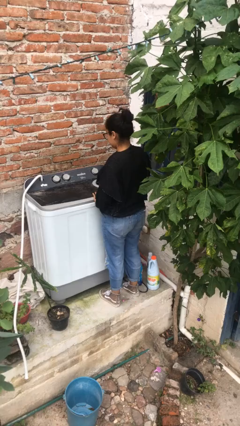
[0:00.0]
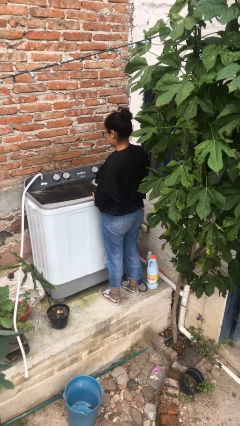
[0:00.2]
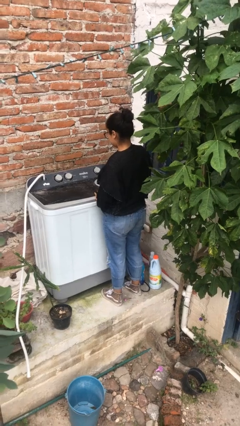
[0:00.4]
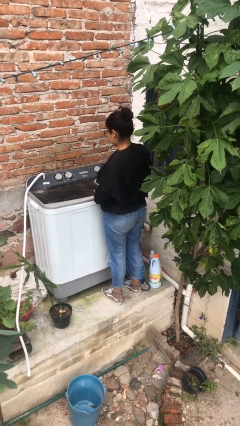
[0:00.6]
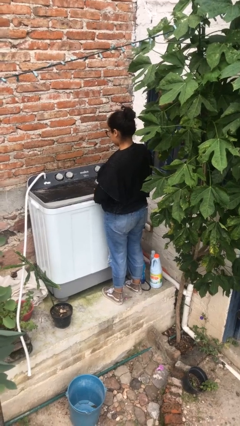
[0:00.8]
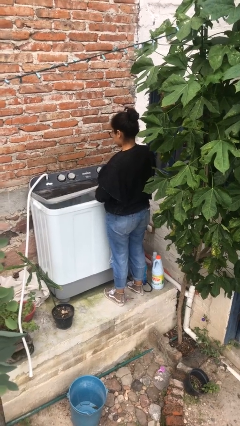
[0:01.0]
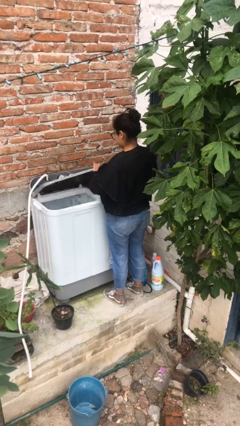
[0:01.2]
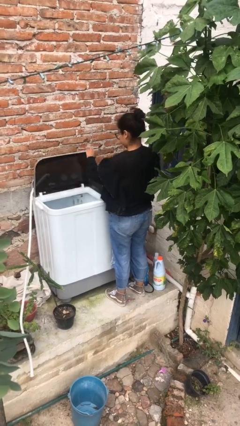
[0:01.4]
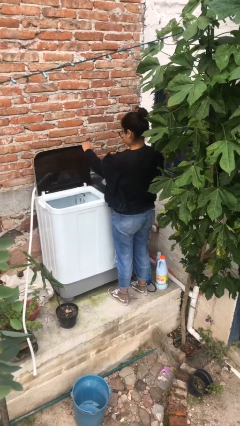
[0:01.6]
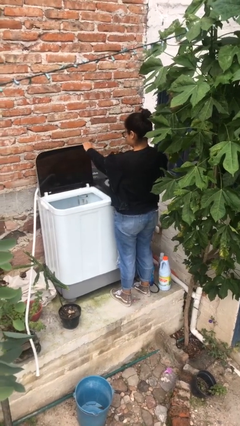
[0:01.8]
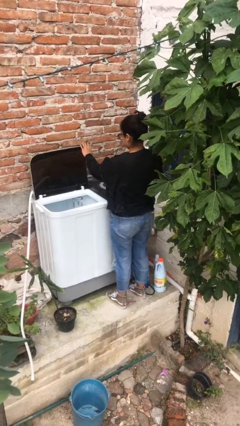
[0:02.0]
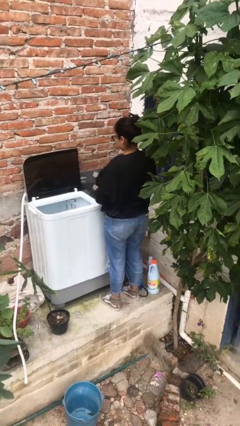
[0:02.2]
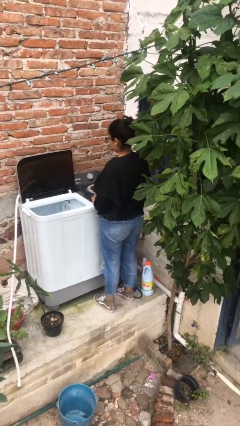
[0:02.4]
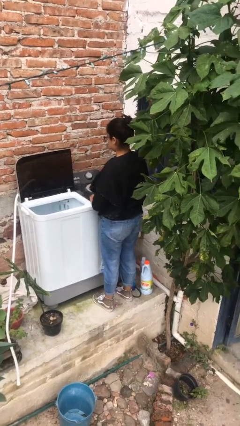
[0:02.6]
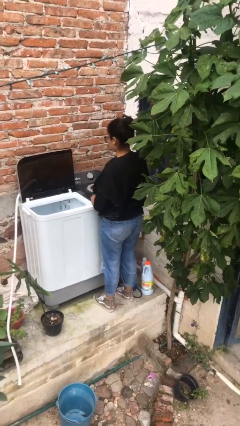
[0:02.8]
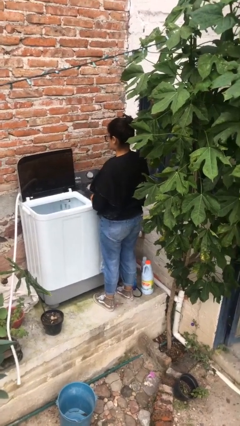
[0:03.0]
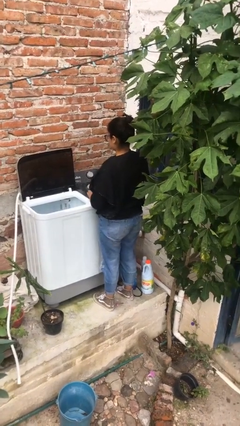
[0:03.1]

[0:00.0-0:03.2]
person opens clothes washer

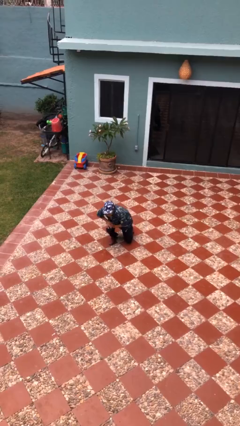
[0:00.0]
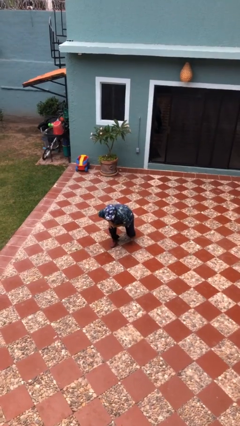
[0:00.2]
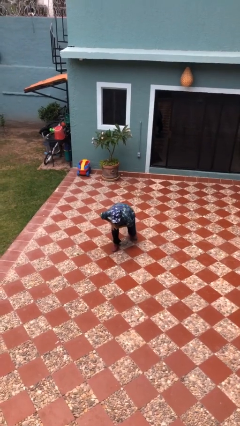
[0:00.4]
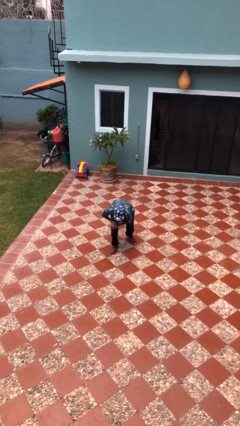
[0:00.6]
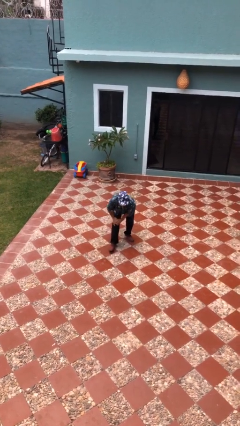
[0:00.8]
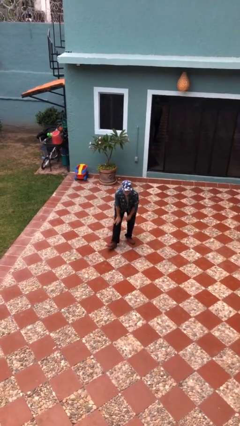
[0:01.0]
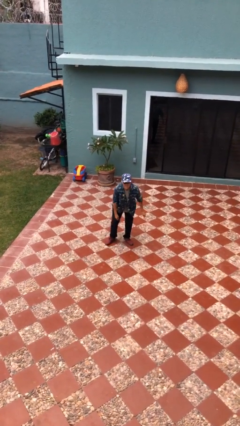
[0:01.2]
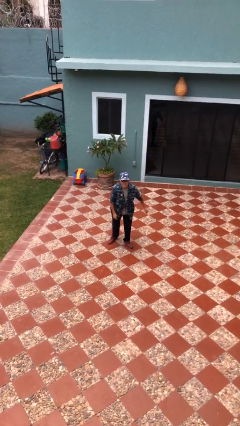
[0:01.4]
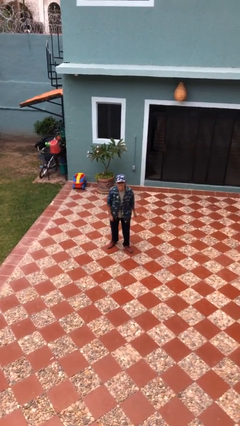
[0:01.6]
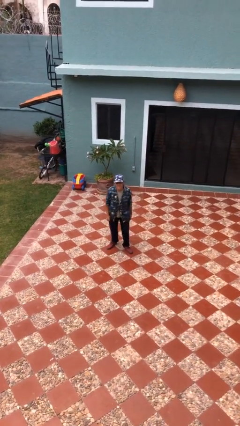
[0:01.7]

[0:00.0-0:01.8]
person stands up from floor

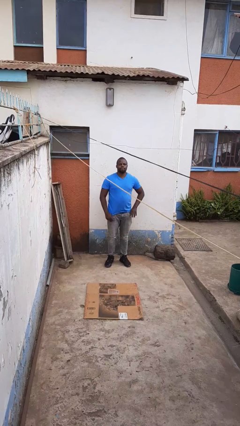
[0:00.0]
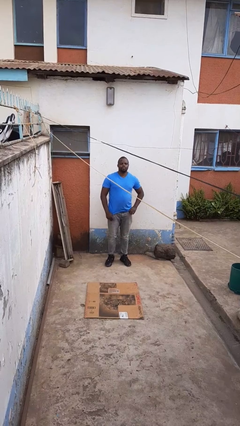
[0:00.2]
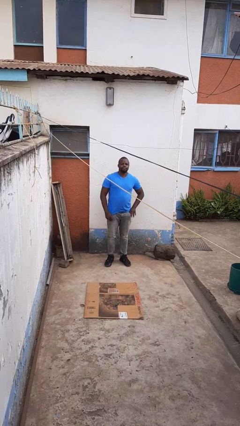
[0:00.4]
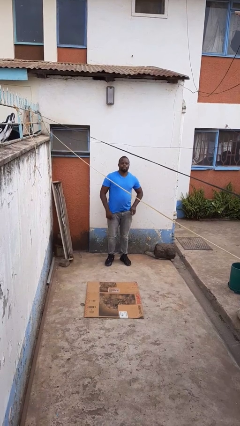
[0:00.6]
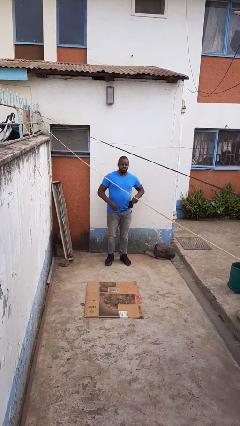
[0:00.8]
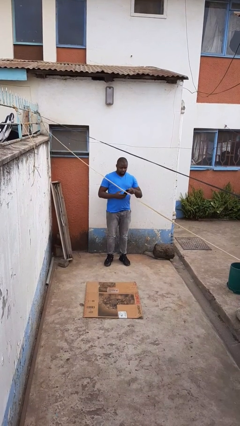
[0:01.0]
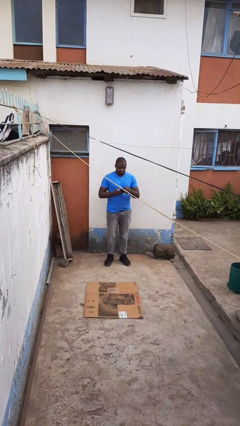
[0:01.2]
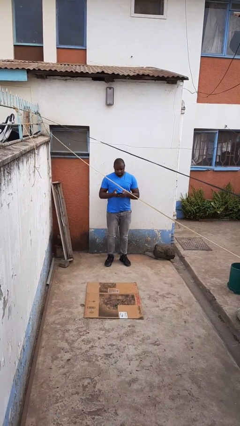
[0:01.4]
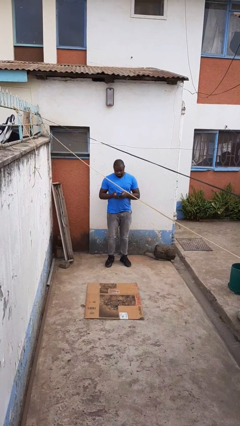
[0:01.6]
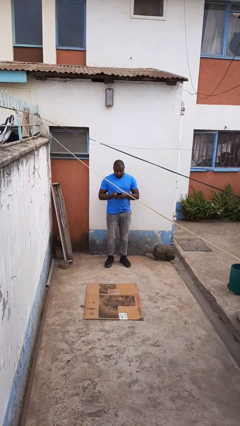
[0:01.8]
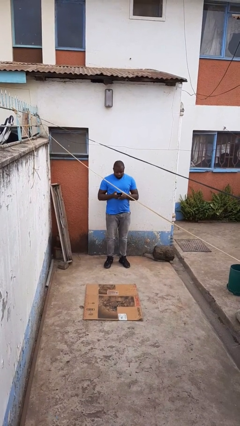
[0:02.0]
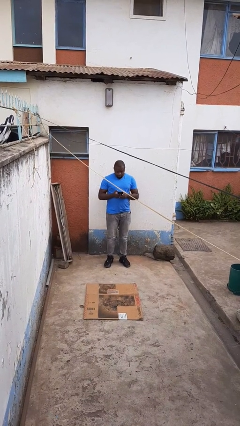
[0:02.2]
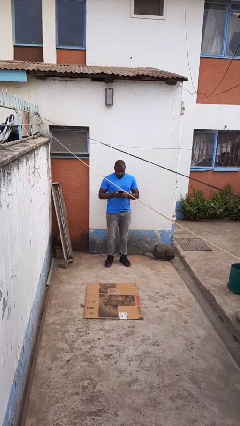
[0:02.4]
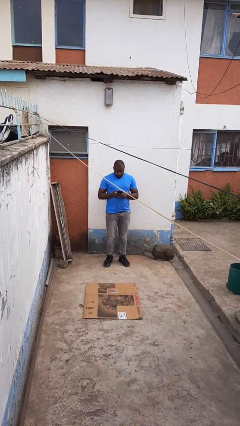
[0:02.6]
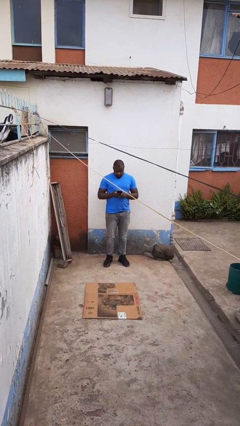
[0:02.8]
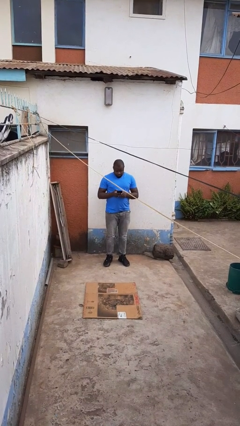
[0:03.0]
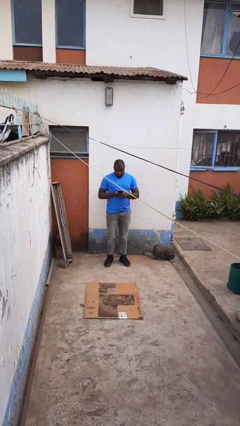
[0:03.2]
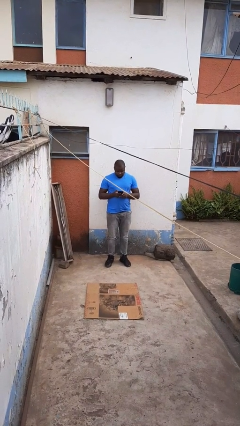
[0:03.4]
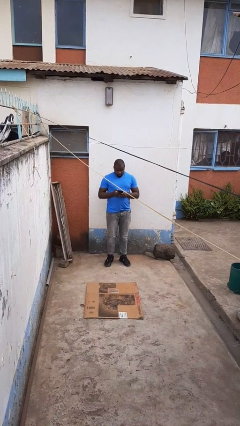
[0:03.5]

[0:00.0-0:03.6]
person takes phone from pocket

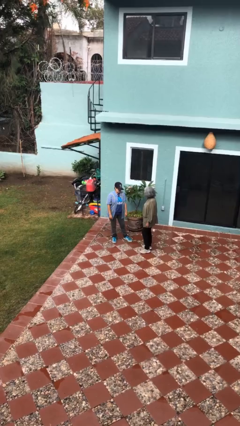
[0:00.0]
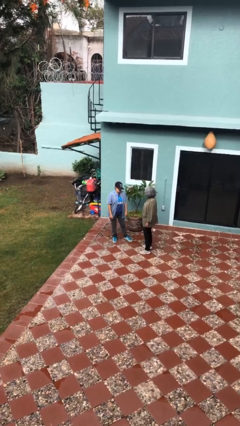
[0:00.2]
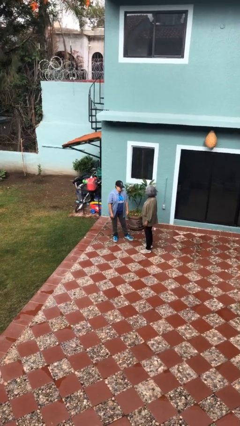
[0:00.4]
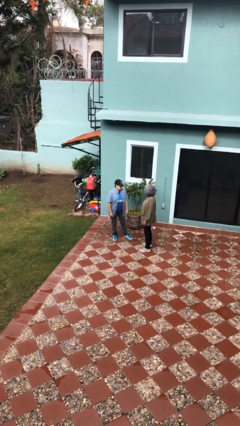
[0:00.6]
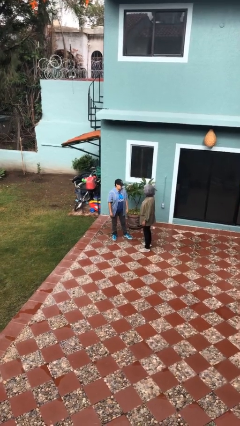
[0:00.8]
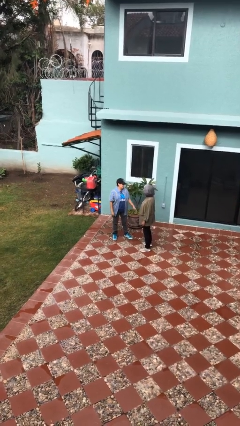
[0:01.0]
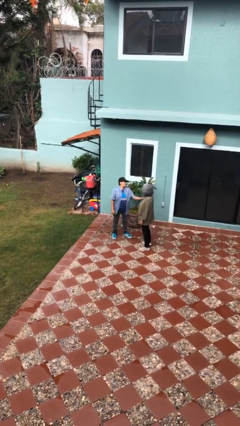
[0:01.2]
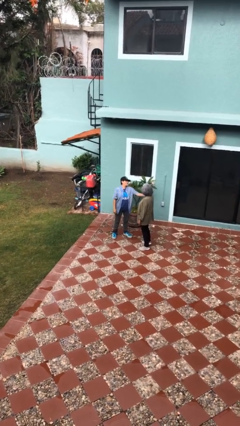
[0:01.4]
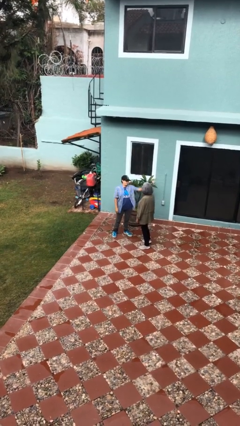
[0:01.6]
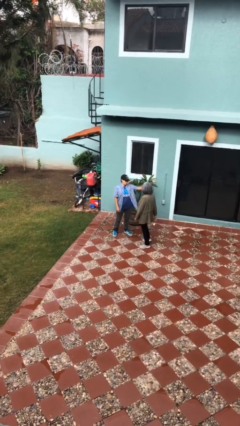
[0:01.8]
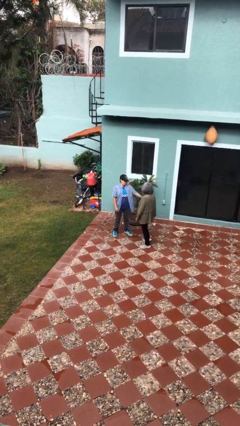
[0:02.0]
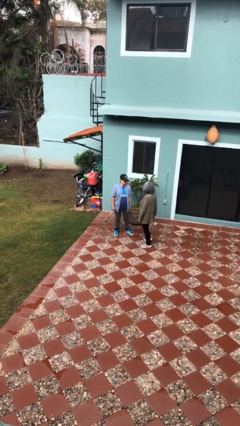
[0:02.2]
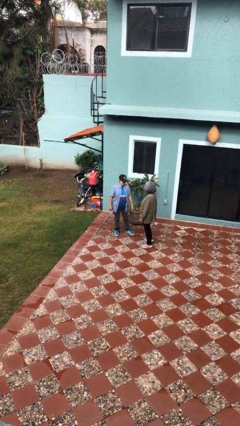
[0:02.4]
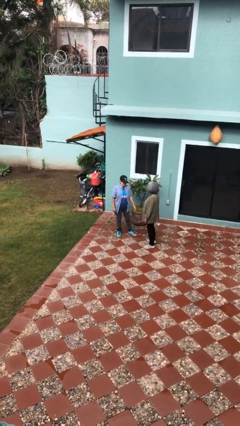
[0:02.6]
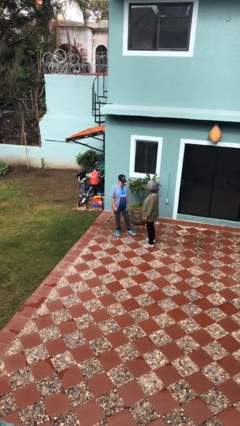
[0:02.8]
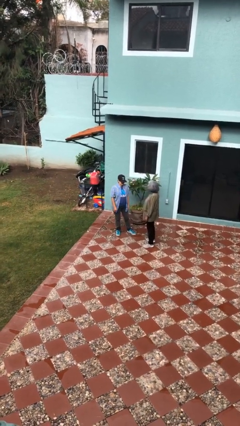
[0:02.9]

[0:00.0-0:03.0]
person shoves person

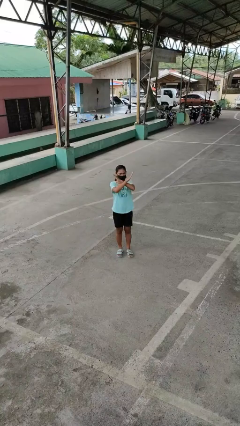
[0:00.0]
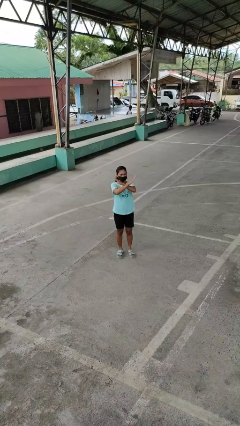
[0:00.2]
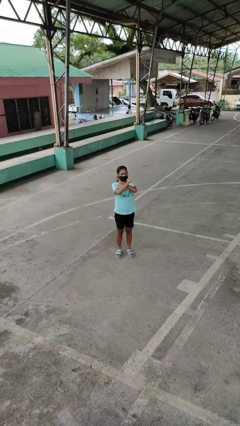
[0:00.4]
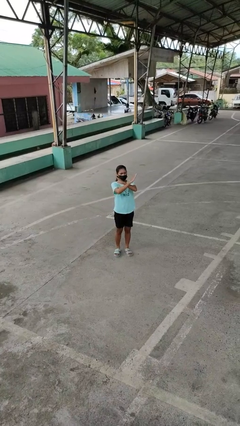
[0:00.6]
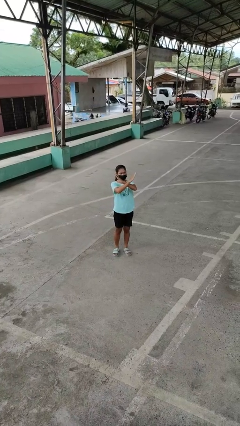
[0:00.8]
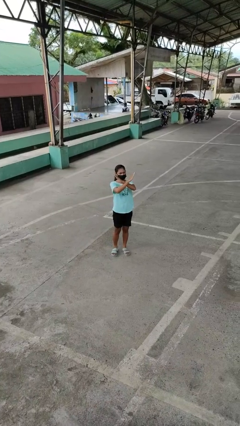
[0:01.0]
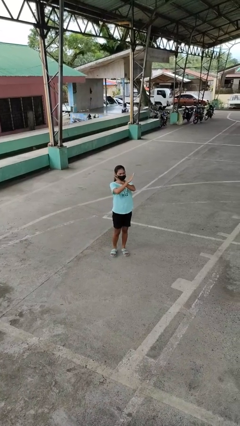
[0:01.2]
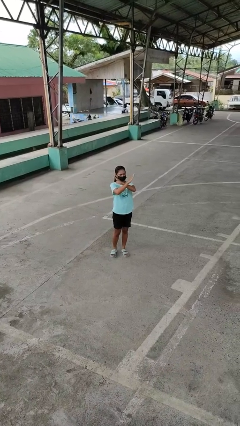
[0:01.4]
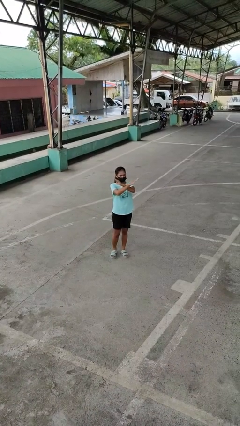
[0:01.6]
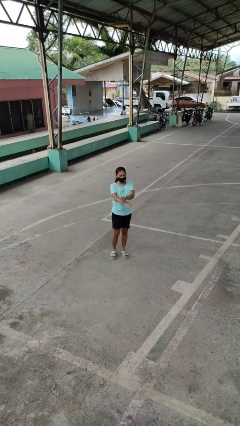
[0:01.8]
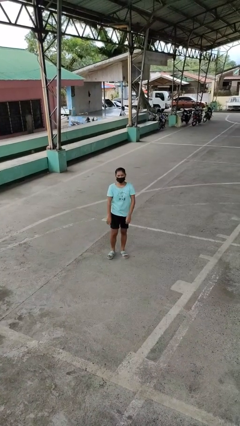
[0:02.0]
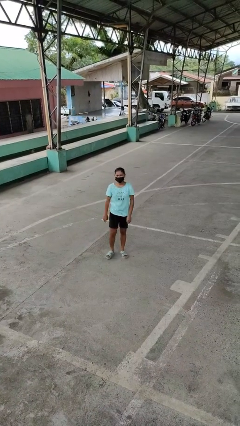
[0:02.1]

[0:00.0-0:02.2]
person gestures arms x

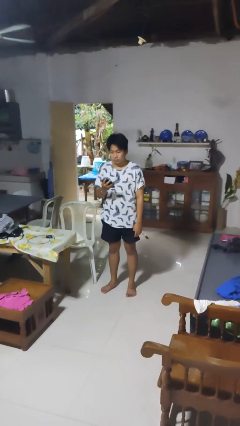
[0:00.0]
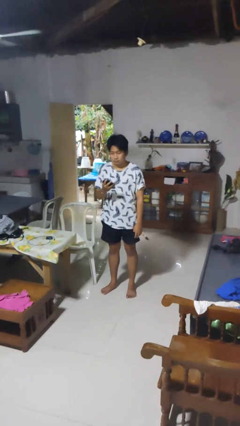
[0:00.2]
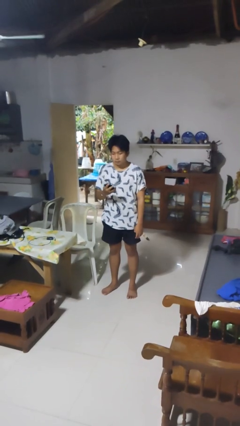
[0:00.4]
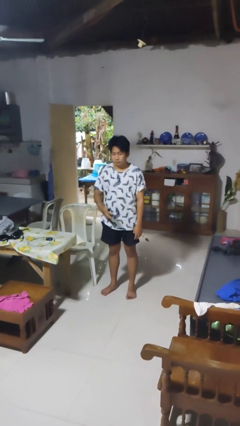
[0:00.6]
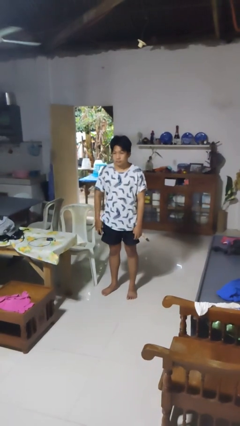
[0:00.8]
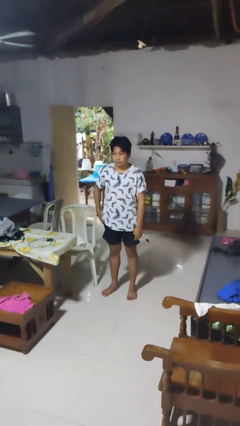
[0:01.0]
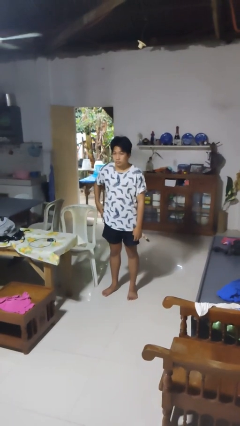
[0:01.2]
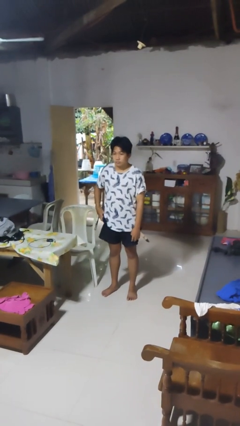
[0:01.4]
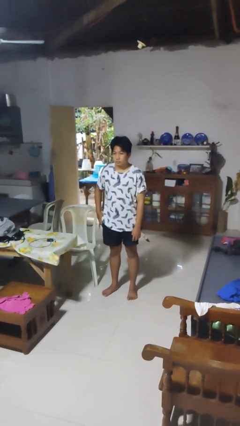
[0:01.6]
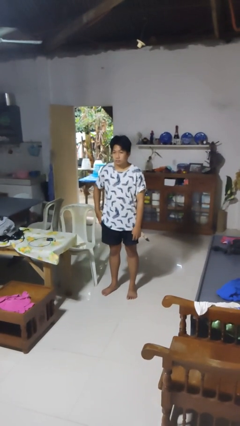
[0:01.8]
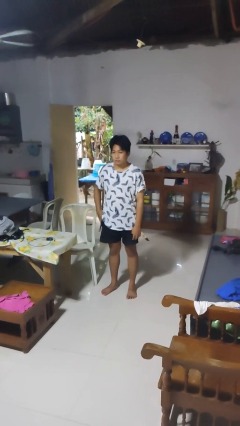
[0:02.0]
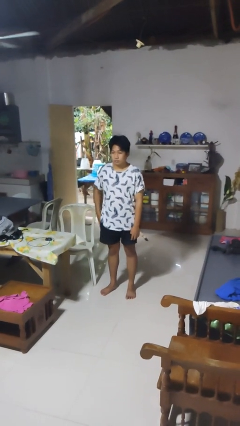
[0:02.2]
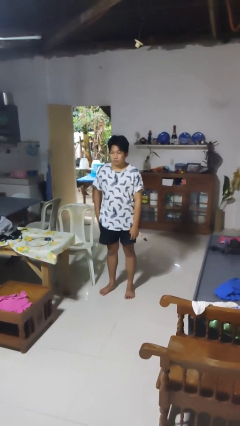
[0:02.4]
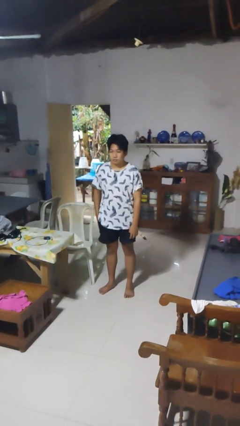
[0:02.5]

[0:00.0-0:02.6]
person puts phone into pocket

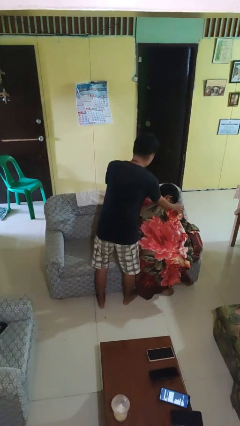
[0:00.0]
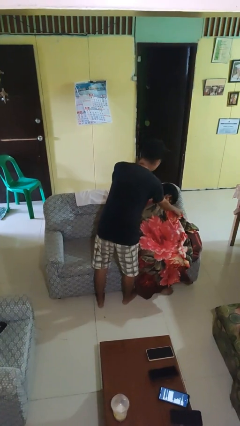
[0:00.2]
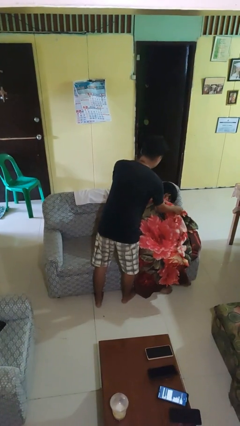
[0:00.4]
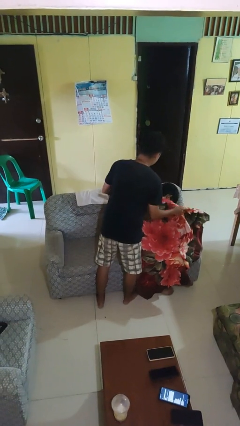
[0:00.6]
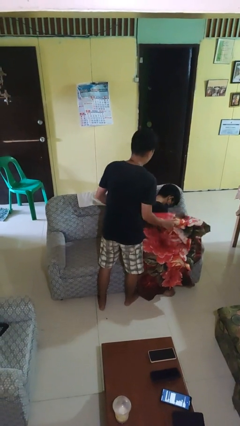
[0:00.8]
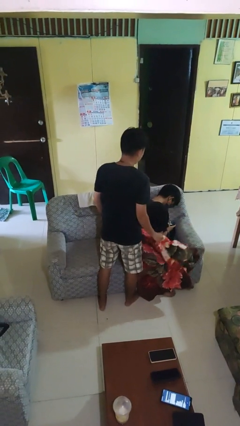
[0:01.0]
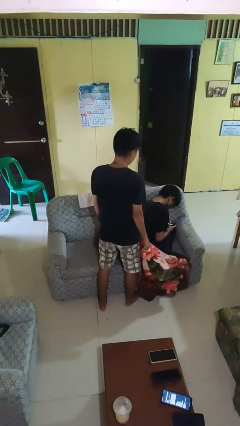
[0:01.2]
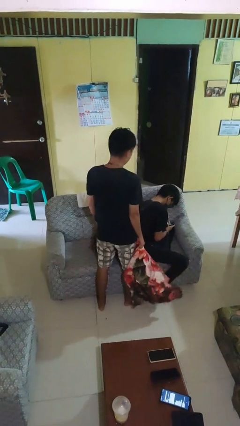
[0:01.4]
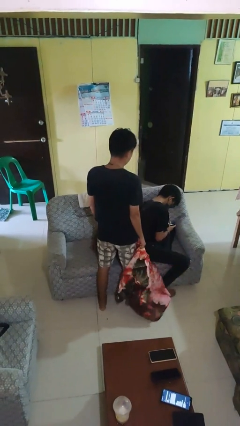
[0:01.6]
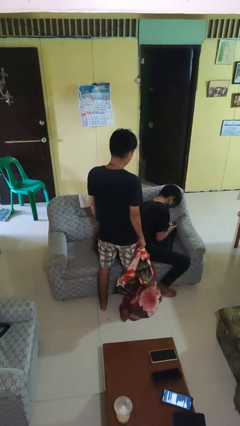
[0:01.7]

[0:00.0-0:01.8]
person uncovers friend with blanket
